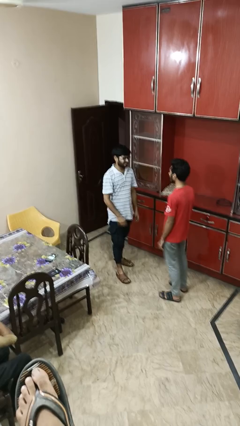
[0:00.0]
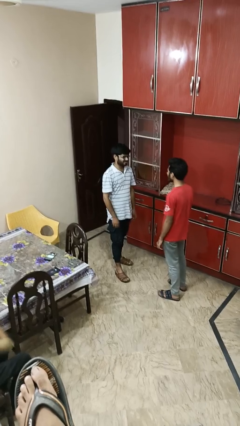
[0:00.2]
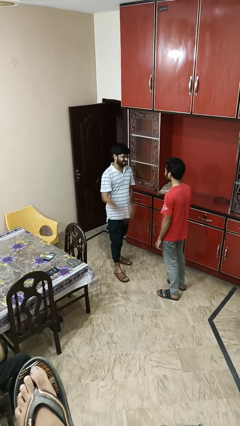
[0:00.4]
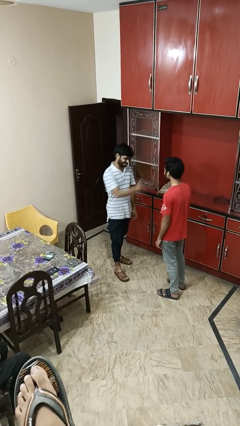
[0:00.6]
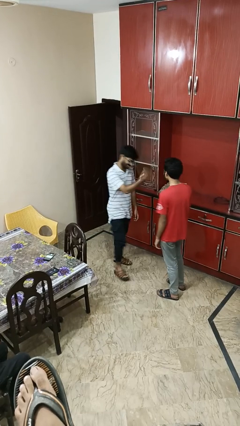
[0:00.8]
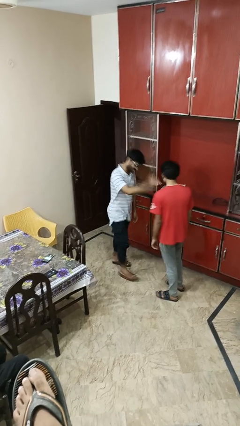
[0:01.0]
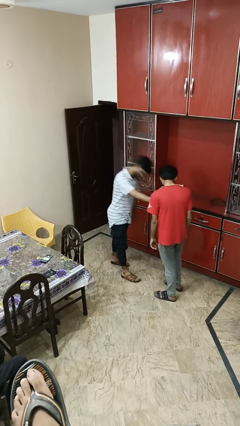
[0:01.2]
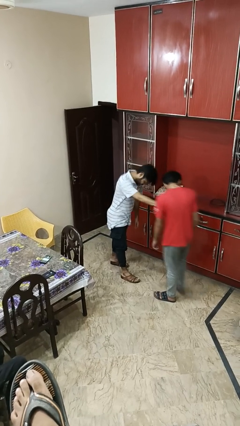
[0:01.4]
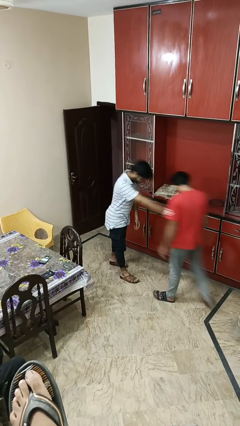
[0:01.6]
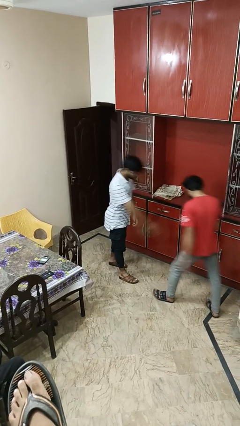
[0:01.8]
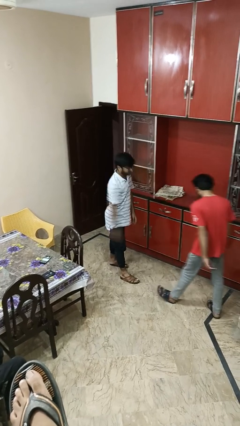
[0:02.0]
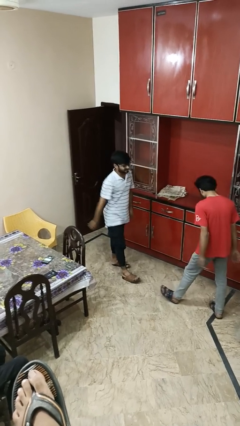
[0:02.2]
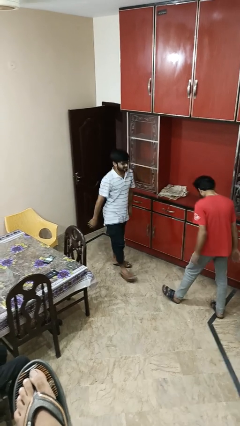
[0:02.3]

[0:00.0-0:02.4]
person shoves person

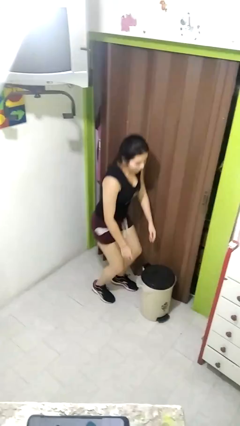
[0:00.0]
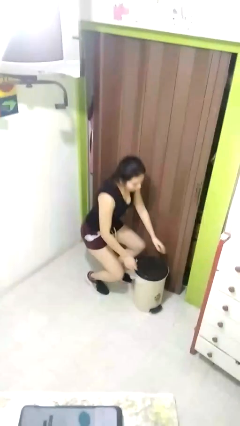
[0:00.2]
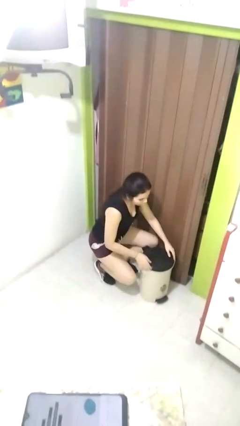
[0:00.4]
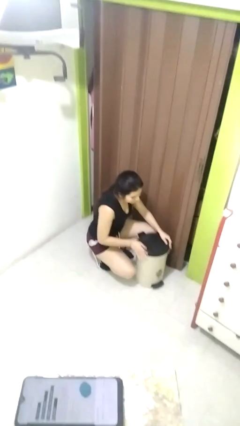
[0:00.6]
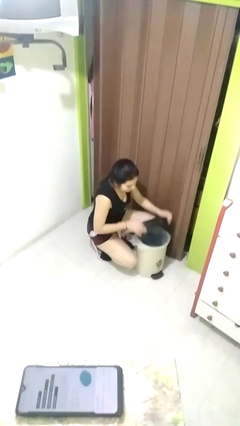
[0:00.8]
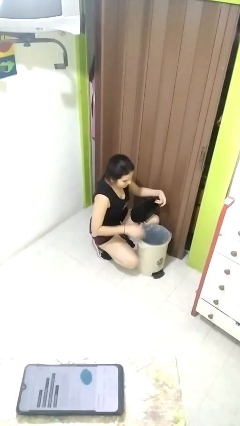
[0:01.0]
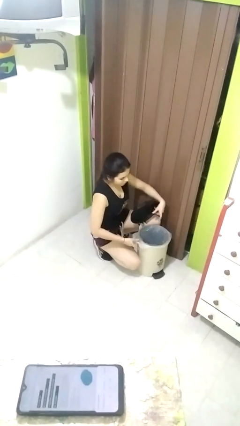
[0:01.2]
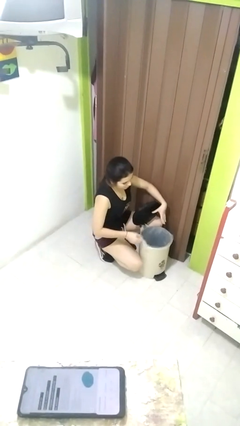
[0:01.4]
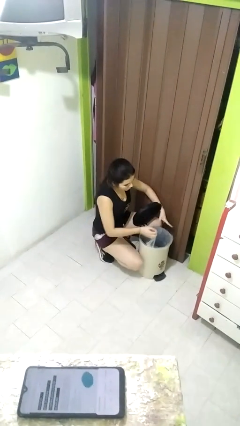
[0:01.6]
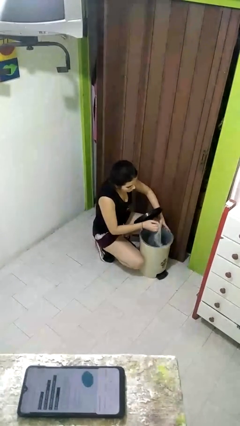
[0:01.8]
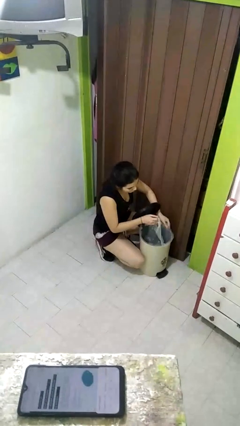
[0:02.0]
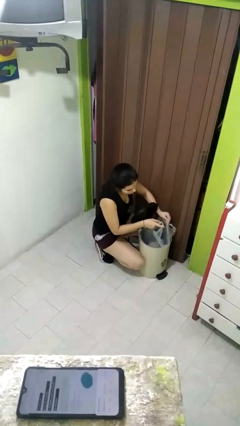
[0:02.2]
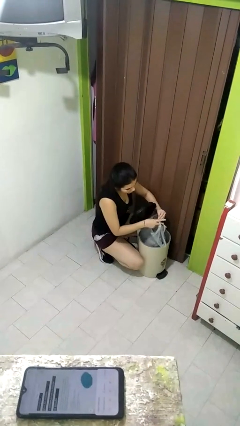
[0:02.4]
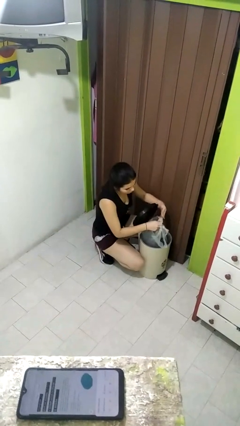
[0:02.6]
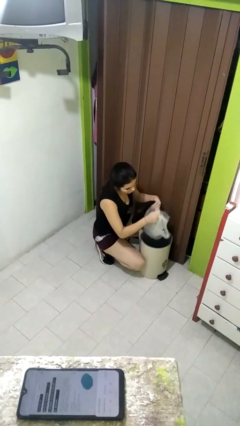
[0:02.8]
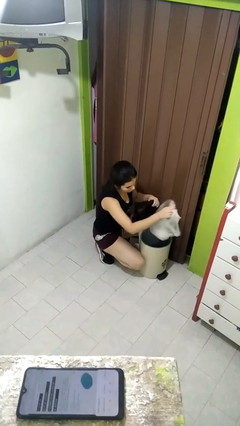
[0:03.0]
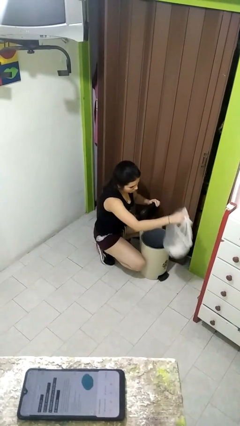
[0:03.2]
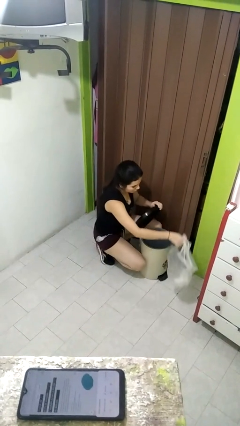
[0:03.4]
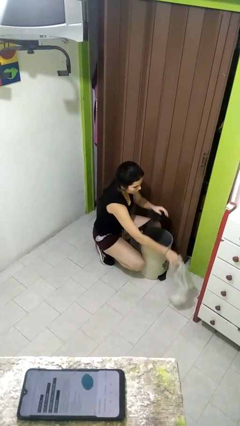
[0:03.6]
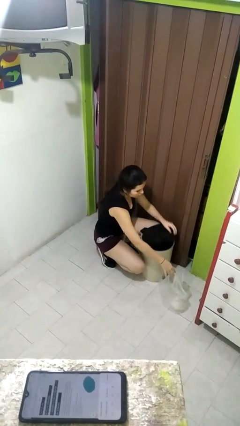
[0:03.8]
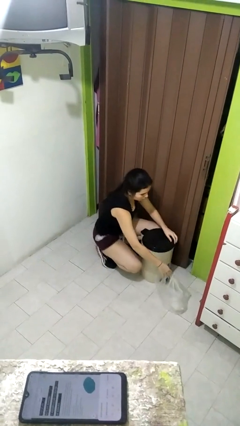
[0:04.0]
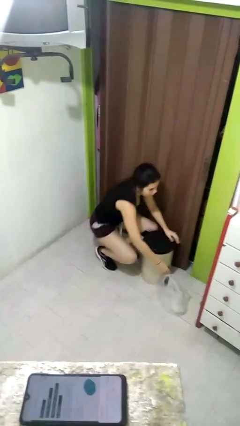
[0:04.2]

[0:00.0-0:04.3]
person removes trashbag from trashcan

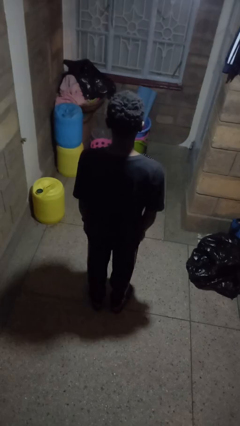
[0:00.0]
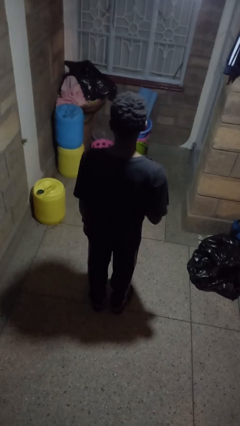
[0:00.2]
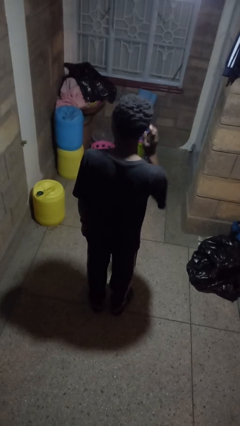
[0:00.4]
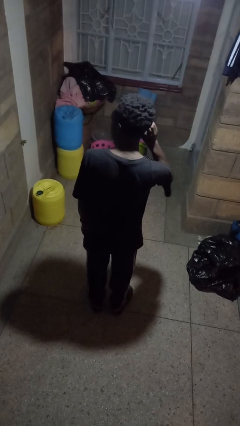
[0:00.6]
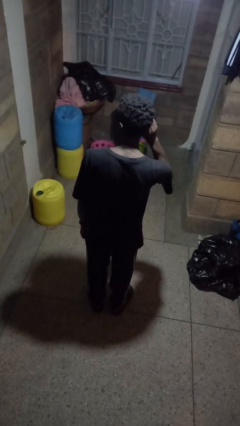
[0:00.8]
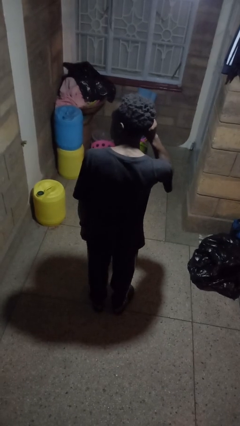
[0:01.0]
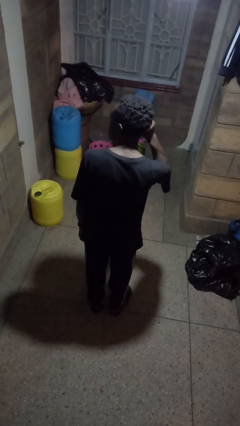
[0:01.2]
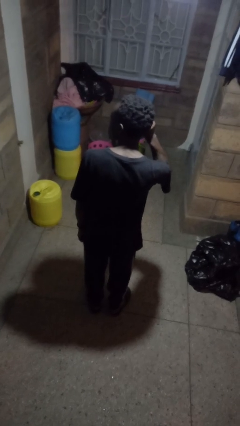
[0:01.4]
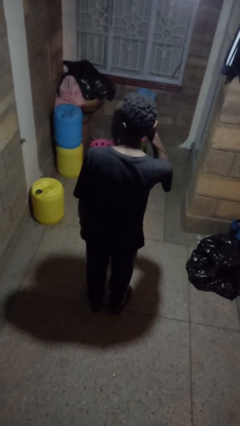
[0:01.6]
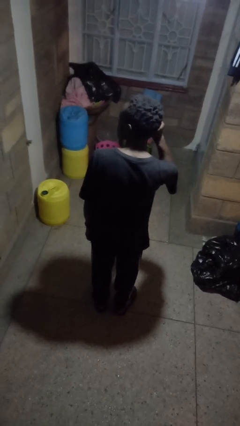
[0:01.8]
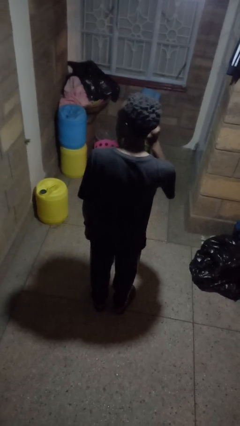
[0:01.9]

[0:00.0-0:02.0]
person touches earlobe

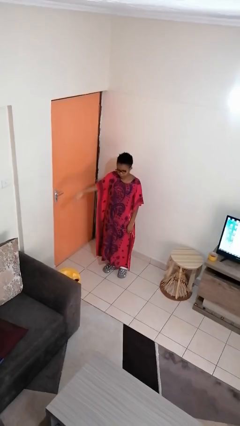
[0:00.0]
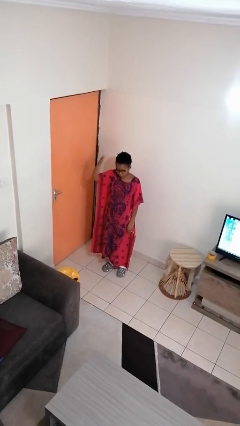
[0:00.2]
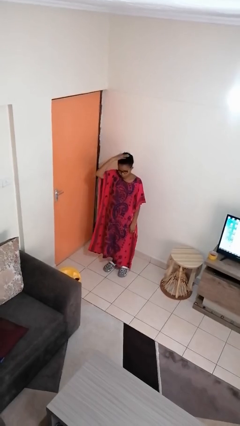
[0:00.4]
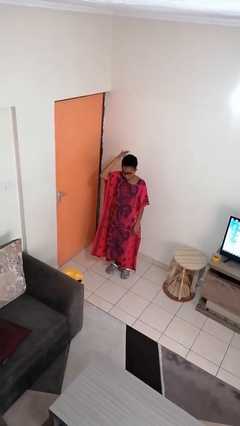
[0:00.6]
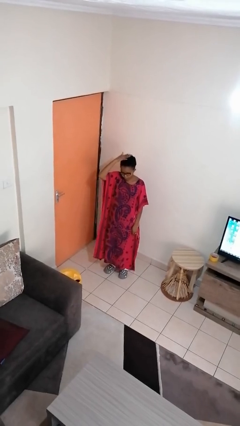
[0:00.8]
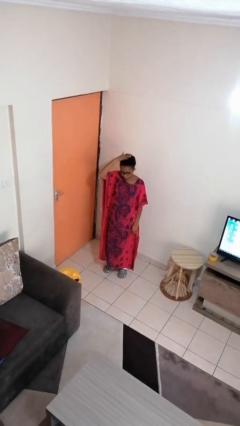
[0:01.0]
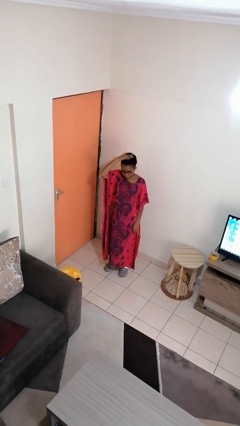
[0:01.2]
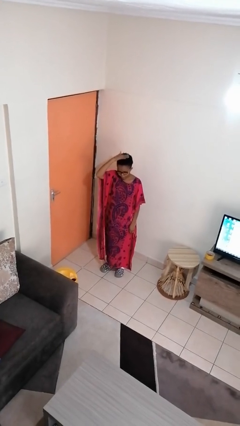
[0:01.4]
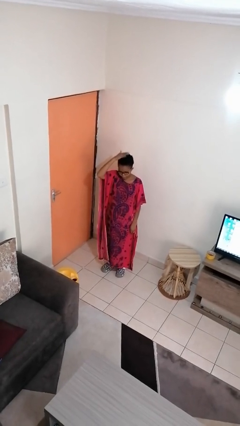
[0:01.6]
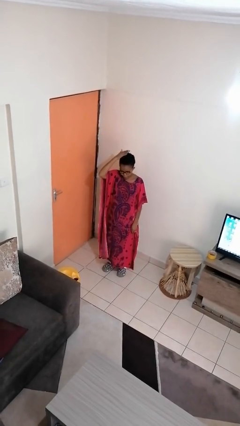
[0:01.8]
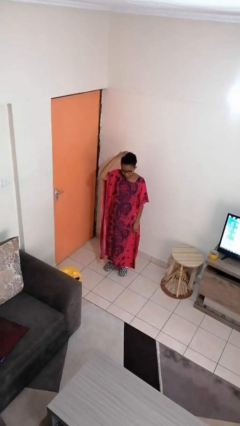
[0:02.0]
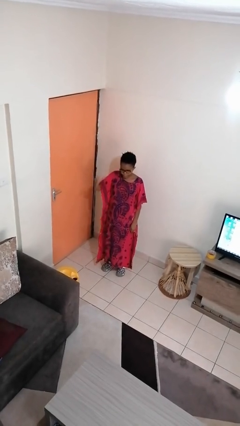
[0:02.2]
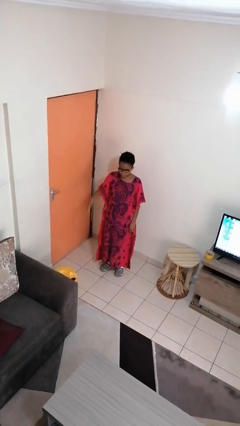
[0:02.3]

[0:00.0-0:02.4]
person pats head

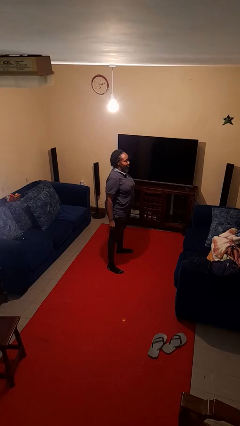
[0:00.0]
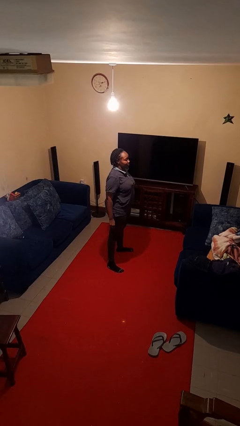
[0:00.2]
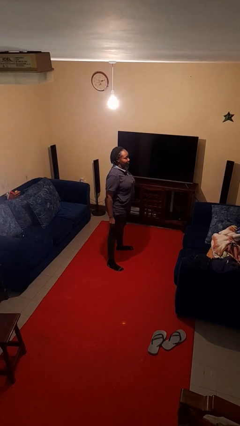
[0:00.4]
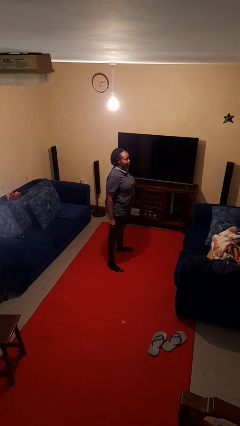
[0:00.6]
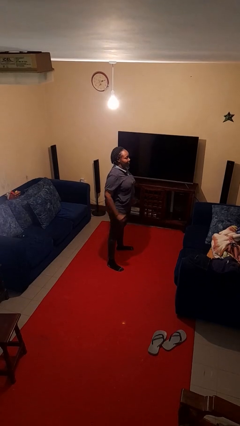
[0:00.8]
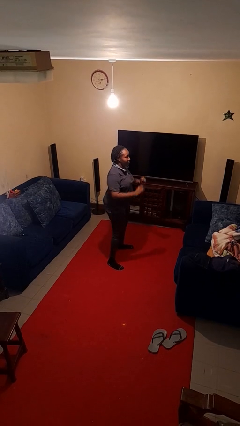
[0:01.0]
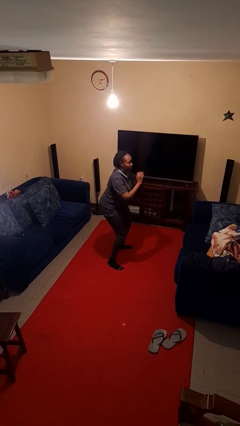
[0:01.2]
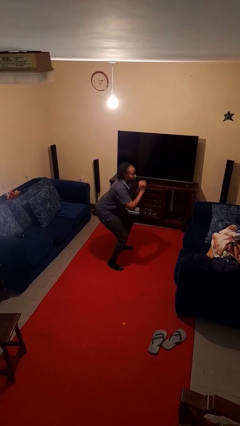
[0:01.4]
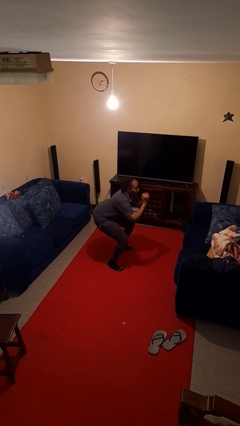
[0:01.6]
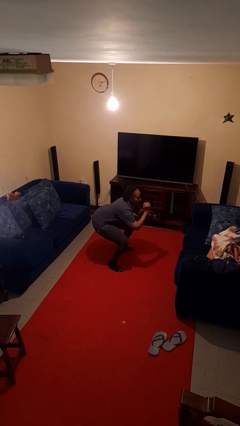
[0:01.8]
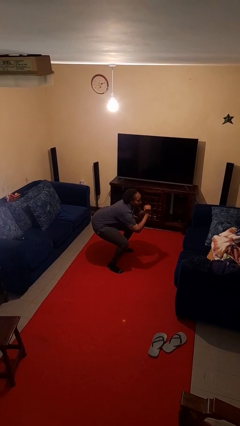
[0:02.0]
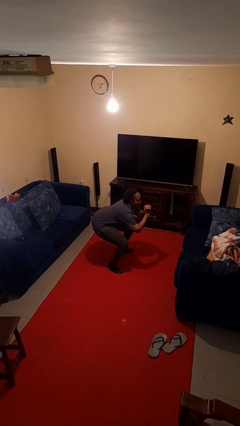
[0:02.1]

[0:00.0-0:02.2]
person squats

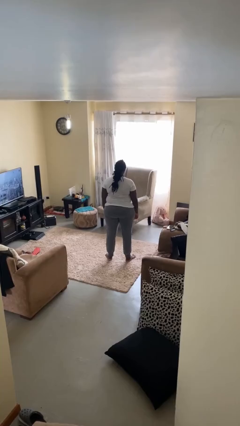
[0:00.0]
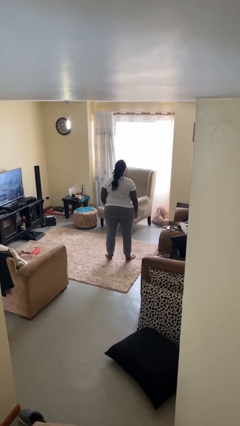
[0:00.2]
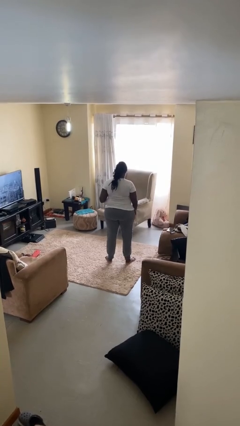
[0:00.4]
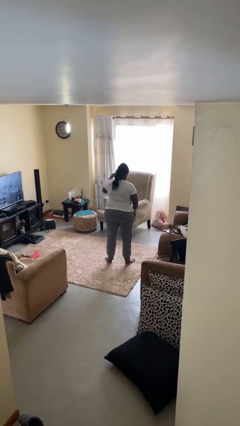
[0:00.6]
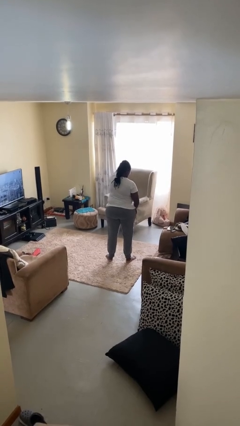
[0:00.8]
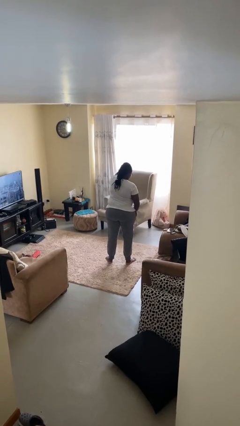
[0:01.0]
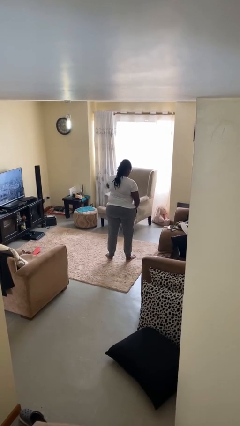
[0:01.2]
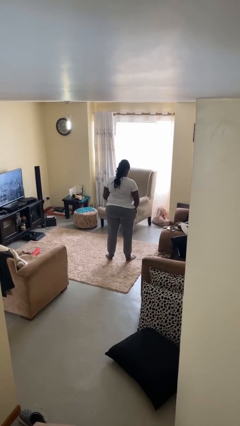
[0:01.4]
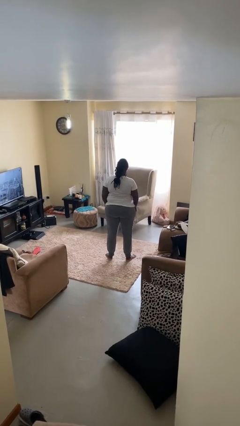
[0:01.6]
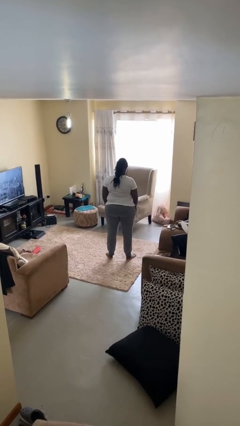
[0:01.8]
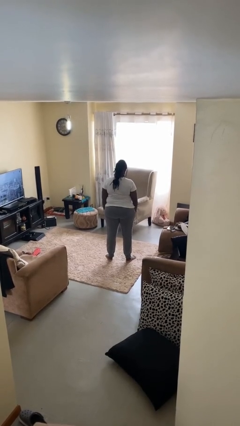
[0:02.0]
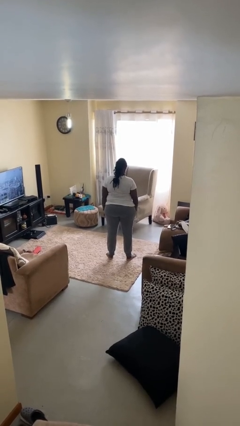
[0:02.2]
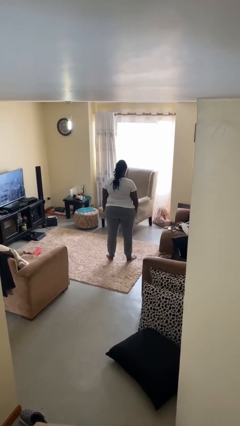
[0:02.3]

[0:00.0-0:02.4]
person punches

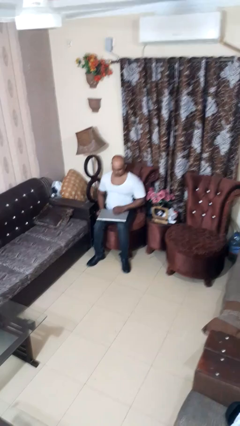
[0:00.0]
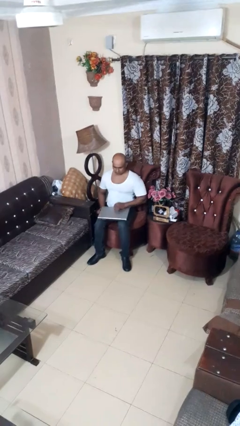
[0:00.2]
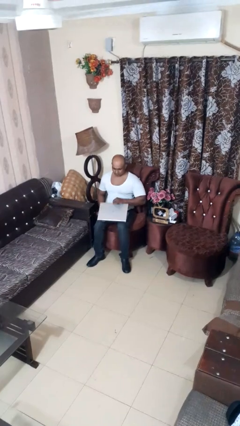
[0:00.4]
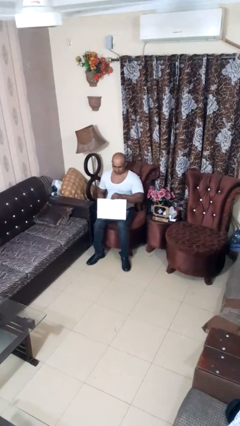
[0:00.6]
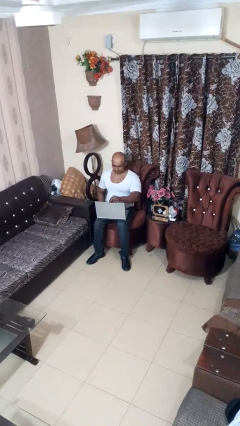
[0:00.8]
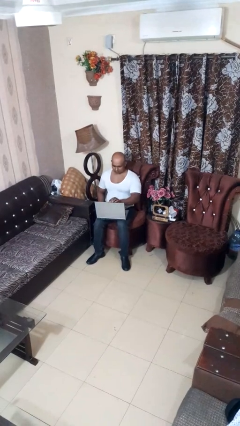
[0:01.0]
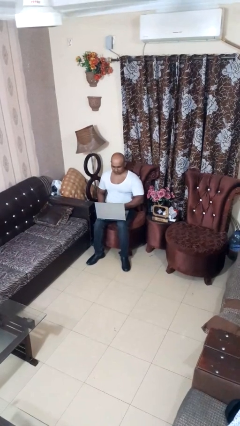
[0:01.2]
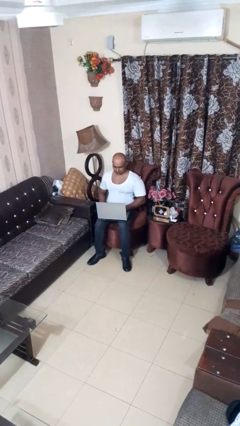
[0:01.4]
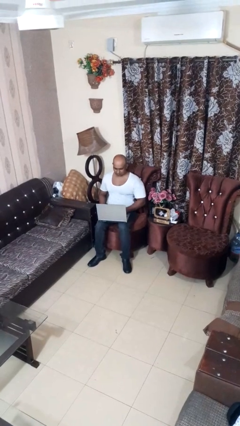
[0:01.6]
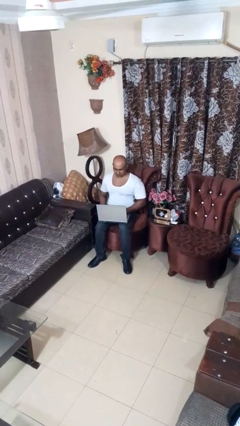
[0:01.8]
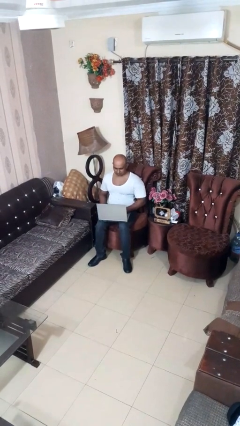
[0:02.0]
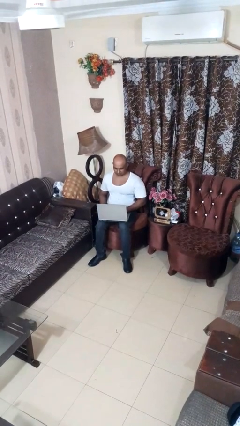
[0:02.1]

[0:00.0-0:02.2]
person opens laptop
